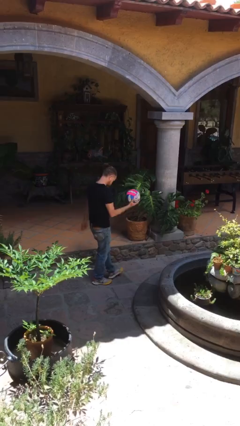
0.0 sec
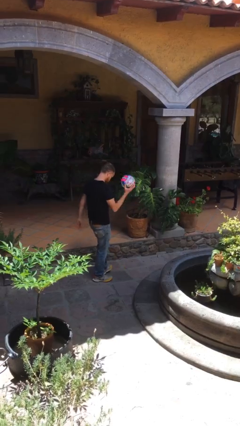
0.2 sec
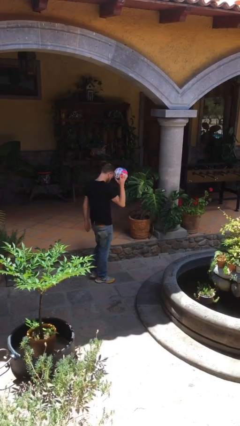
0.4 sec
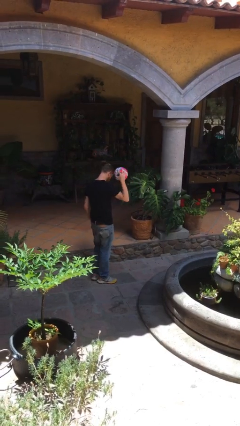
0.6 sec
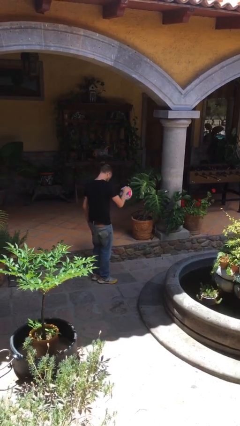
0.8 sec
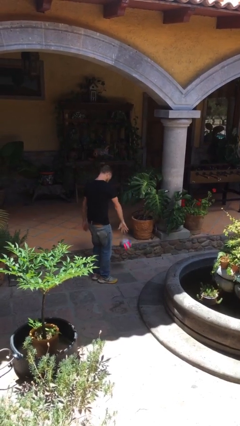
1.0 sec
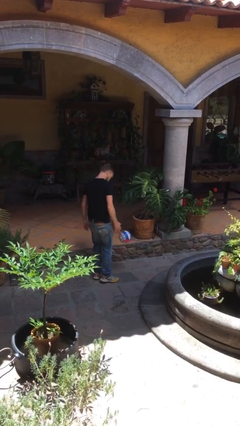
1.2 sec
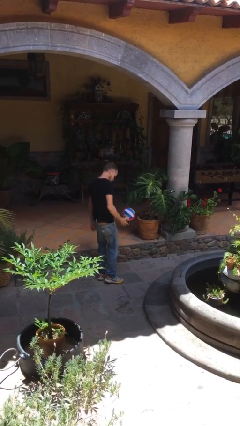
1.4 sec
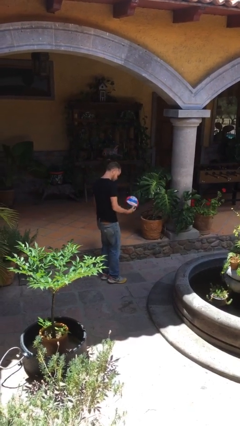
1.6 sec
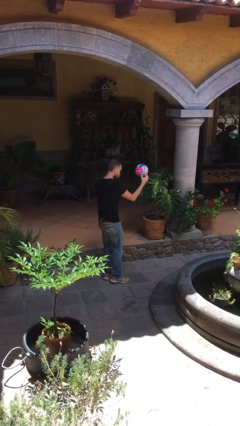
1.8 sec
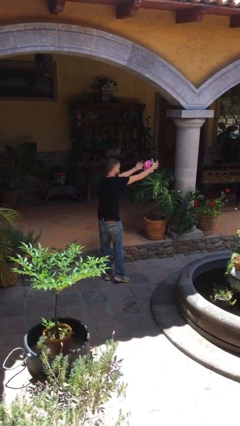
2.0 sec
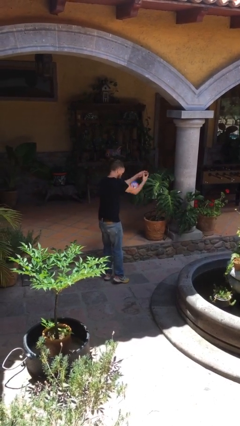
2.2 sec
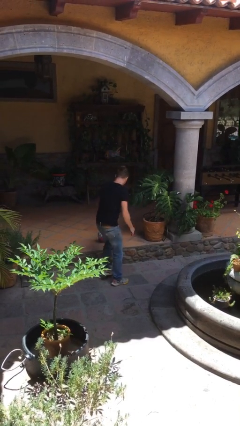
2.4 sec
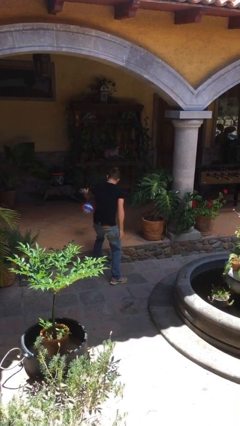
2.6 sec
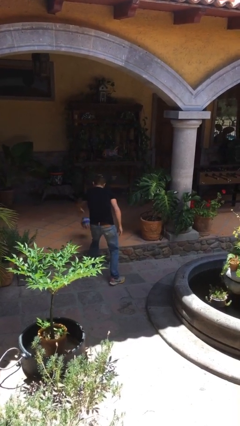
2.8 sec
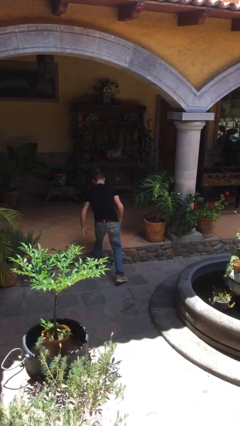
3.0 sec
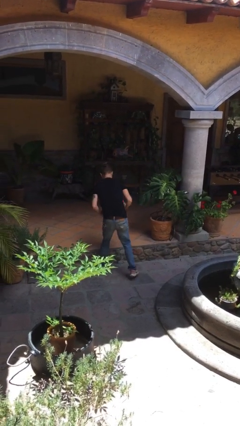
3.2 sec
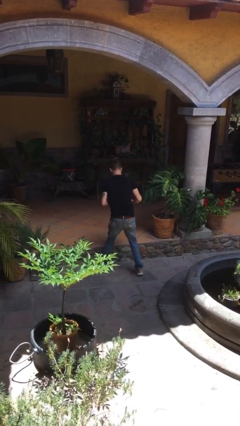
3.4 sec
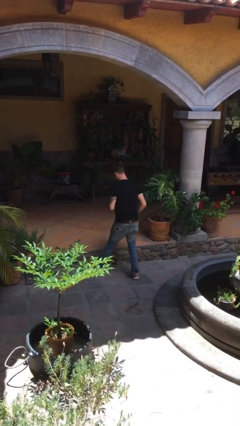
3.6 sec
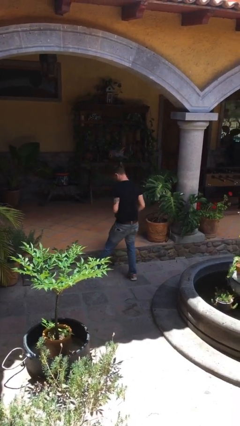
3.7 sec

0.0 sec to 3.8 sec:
person bounces ball on floor

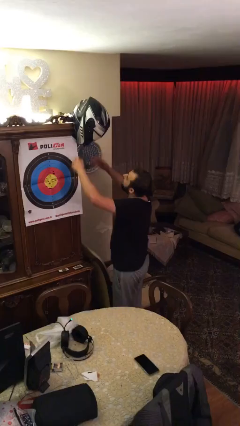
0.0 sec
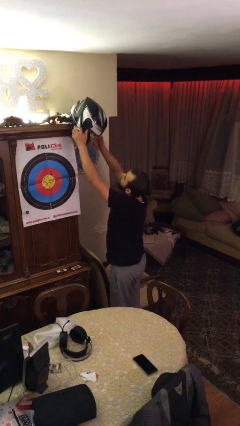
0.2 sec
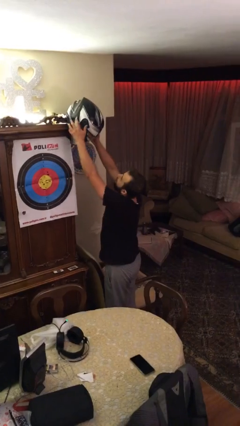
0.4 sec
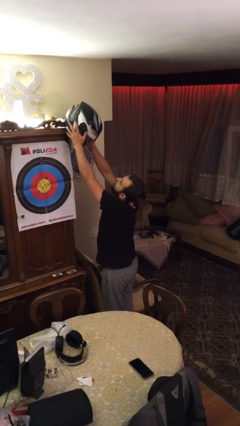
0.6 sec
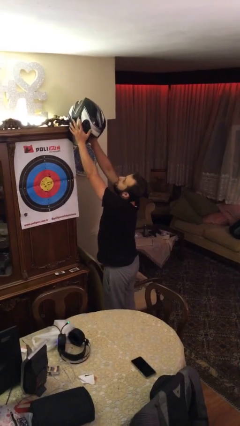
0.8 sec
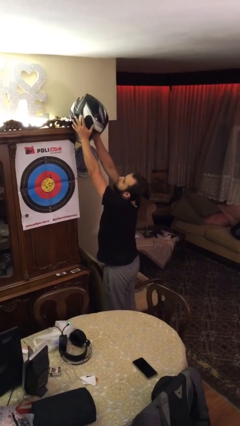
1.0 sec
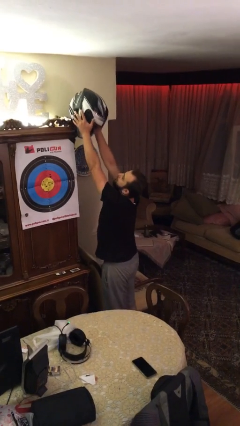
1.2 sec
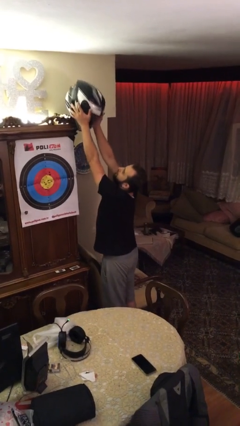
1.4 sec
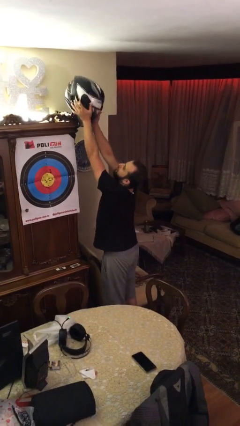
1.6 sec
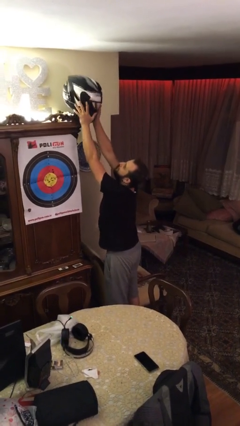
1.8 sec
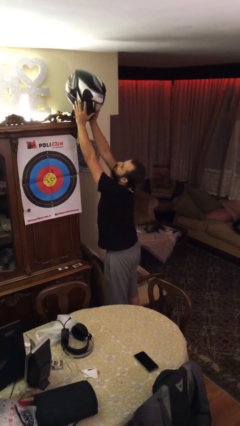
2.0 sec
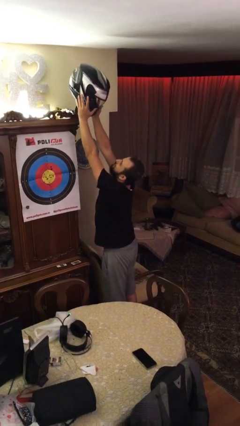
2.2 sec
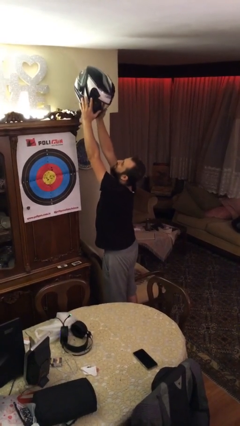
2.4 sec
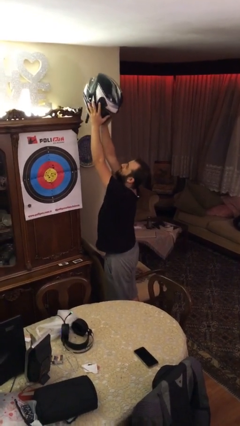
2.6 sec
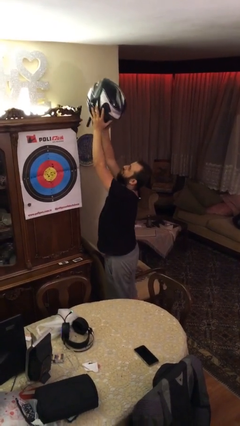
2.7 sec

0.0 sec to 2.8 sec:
person picks up object from shelf

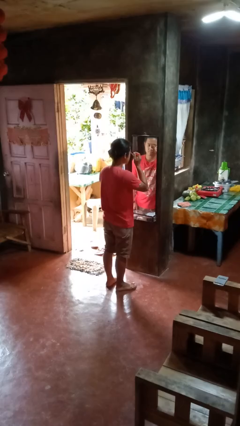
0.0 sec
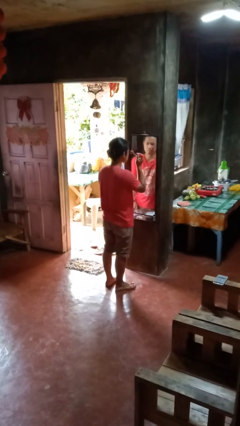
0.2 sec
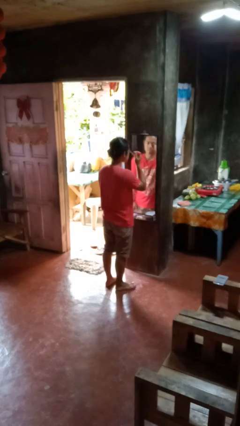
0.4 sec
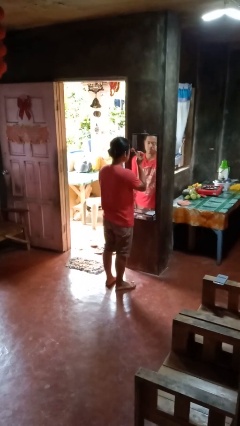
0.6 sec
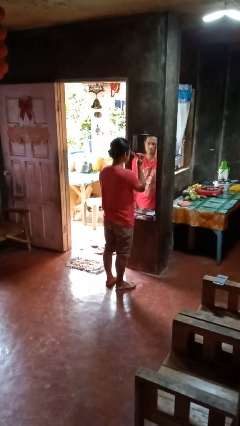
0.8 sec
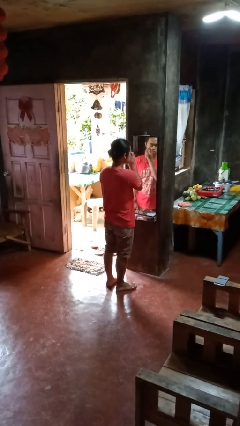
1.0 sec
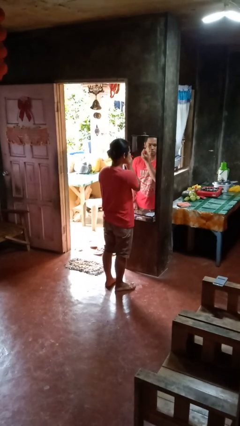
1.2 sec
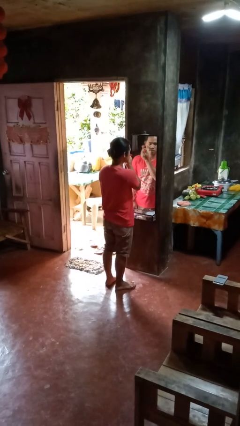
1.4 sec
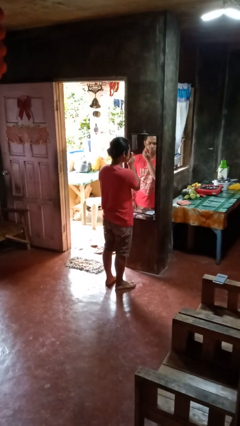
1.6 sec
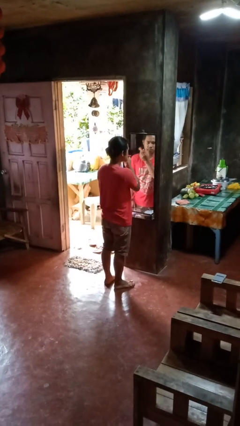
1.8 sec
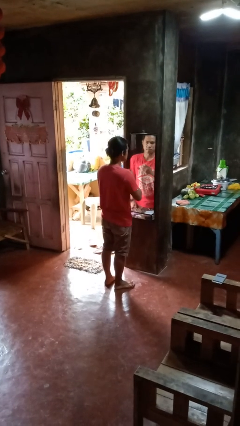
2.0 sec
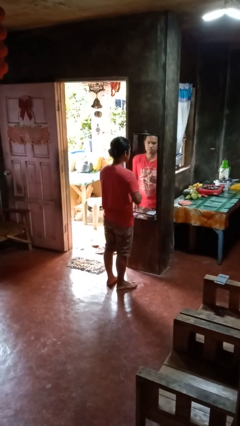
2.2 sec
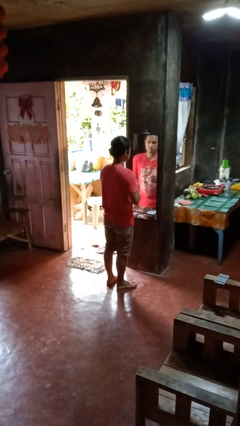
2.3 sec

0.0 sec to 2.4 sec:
person applies eye makeup

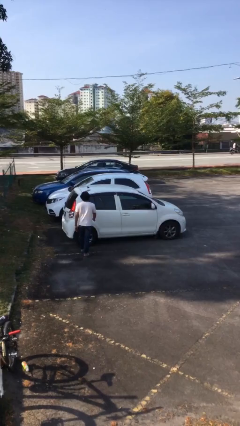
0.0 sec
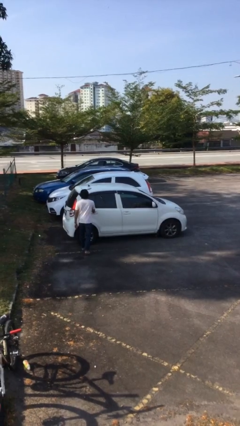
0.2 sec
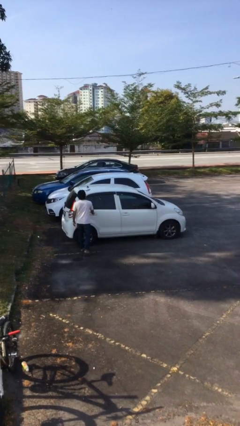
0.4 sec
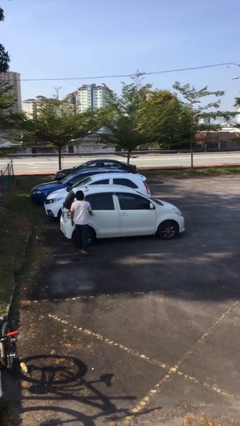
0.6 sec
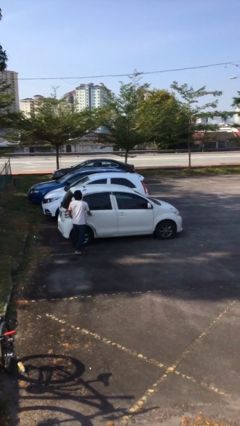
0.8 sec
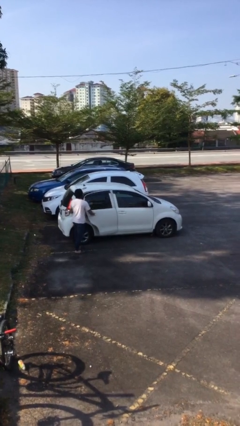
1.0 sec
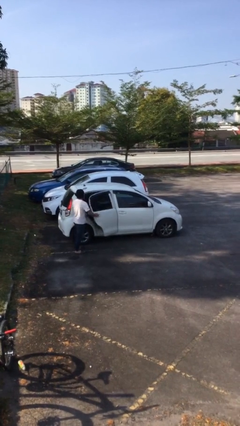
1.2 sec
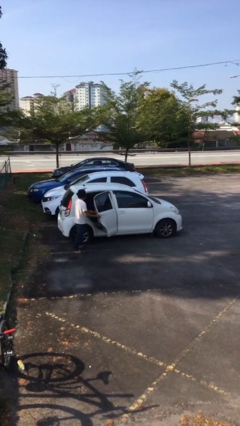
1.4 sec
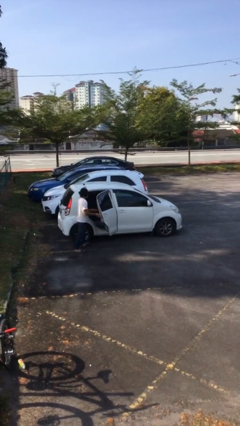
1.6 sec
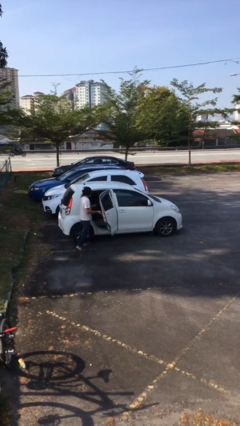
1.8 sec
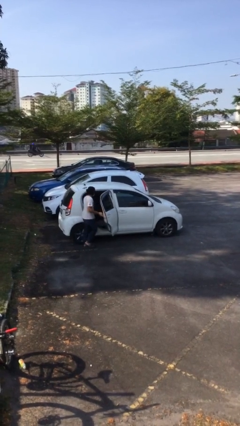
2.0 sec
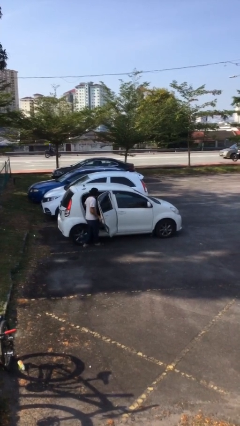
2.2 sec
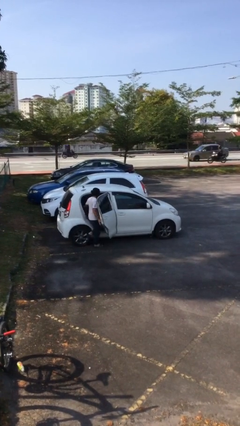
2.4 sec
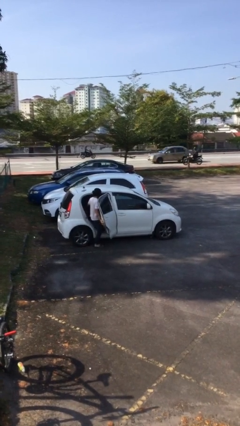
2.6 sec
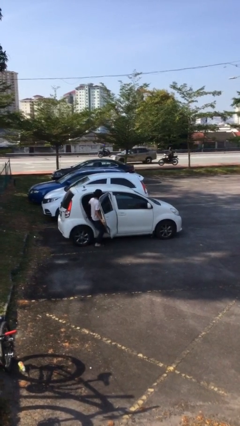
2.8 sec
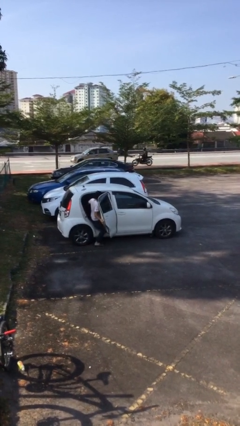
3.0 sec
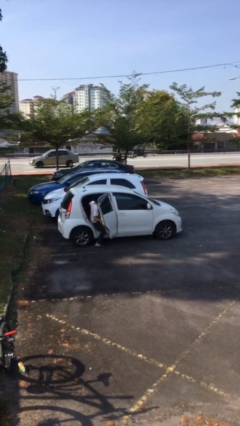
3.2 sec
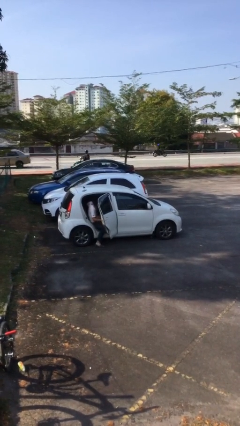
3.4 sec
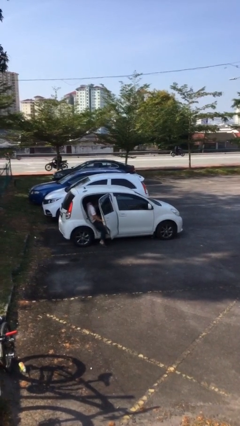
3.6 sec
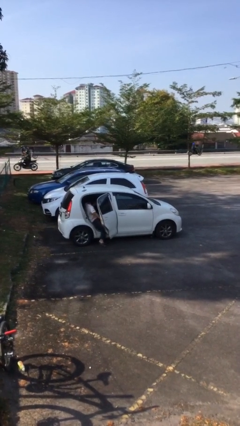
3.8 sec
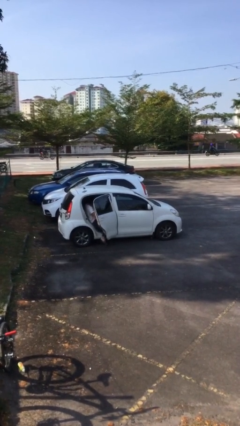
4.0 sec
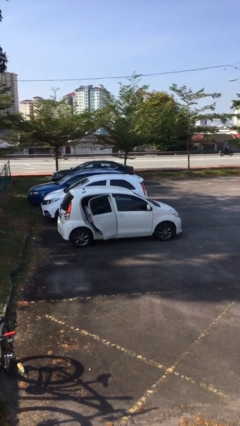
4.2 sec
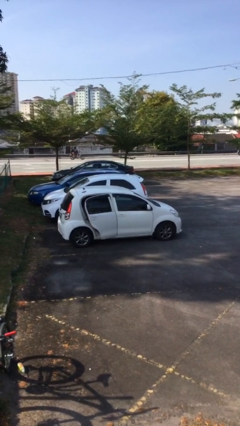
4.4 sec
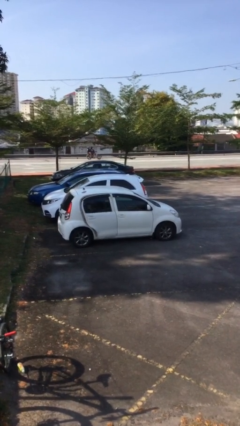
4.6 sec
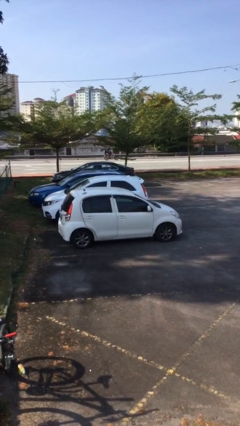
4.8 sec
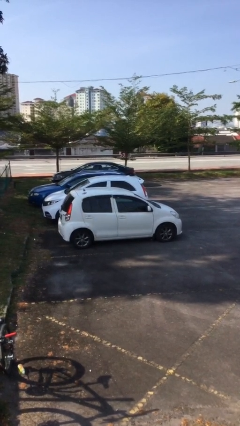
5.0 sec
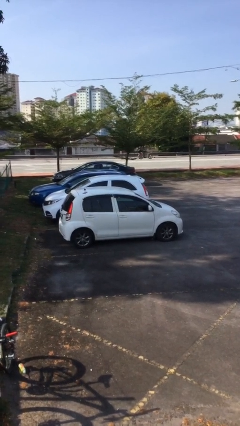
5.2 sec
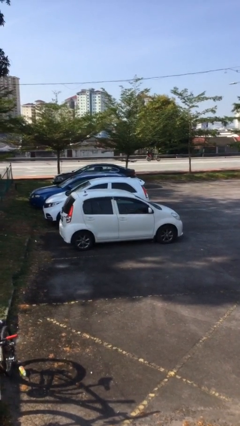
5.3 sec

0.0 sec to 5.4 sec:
car picks up person

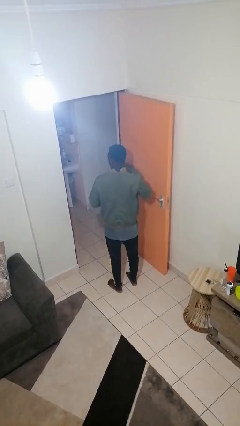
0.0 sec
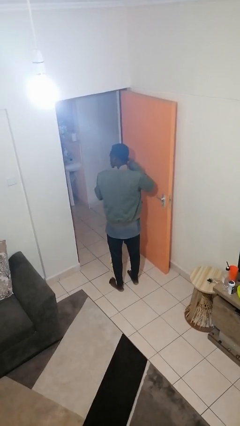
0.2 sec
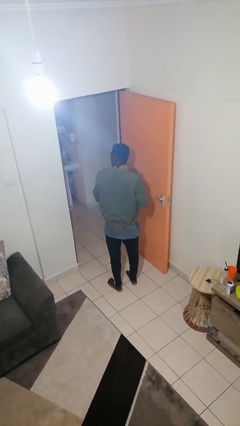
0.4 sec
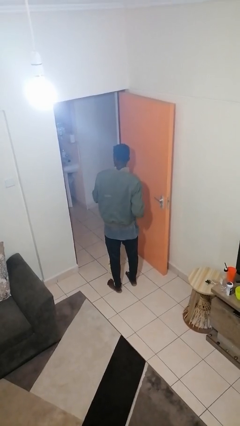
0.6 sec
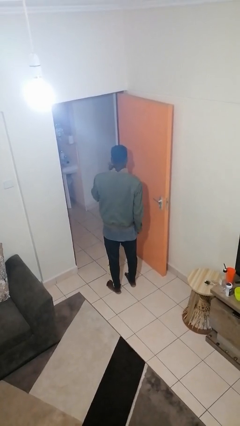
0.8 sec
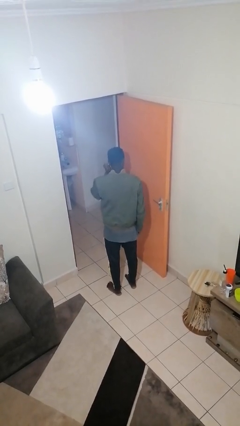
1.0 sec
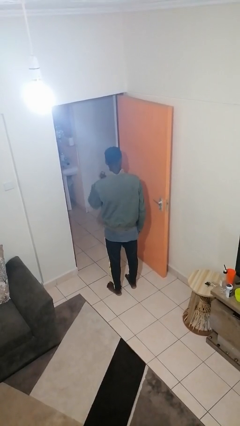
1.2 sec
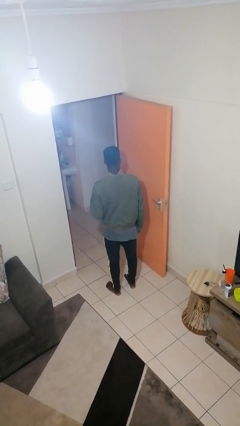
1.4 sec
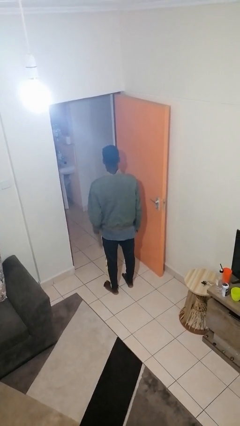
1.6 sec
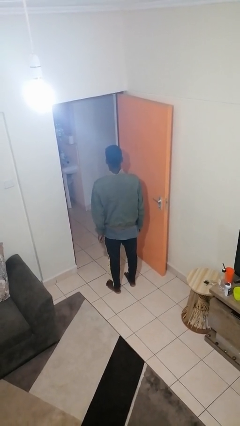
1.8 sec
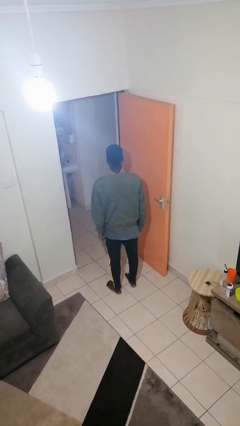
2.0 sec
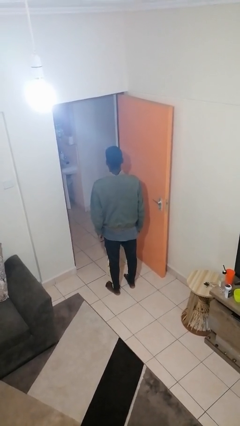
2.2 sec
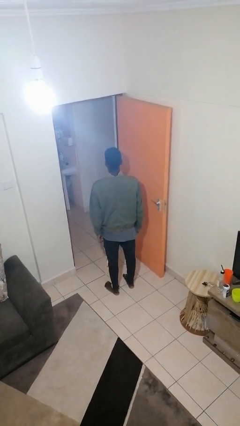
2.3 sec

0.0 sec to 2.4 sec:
person takes off earrings

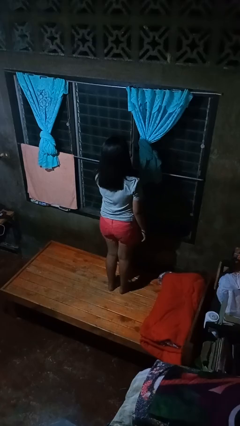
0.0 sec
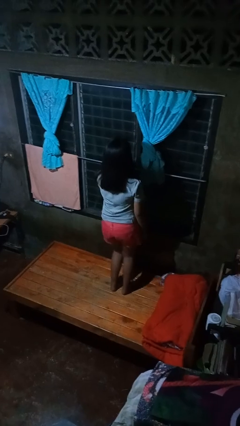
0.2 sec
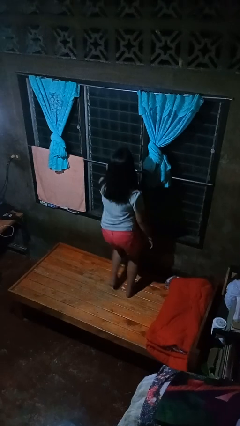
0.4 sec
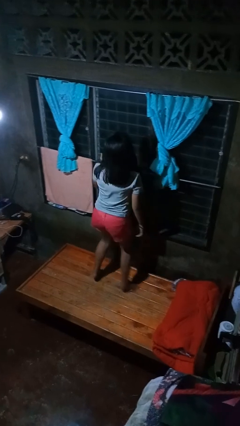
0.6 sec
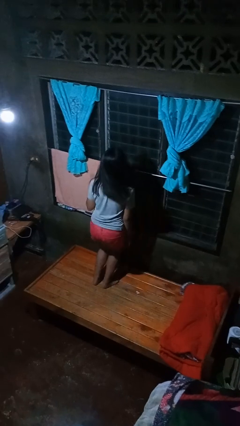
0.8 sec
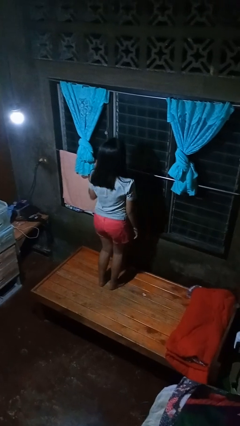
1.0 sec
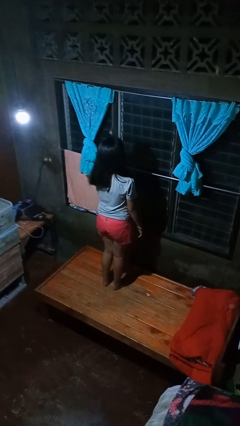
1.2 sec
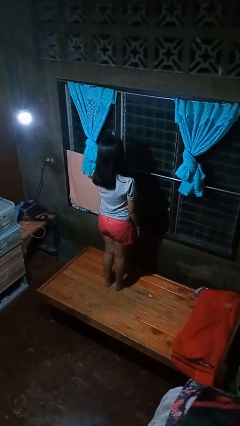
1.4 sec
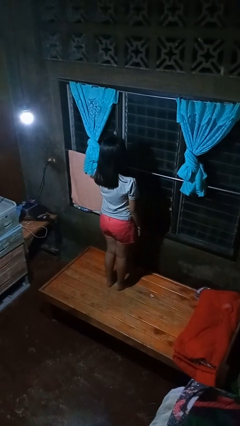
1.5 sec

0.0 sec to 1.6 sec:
person jumps on bed
